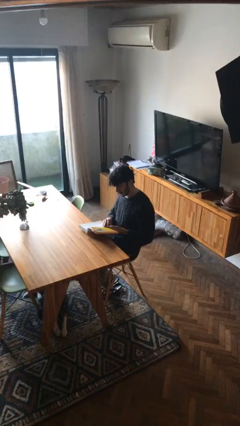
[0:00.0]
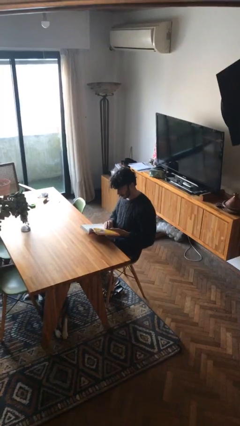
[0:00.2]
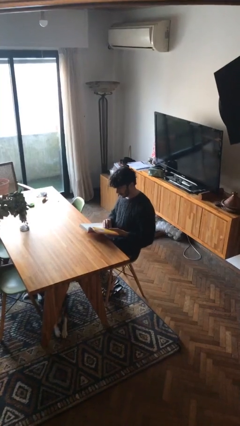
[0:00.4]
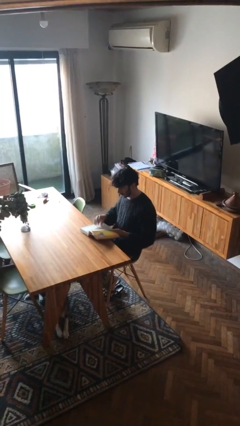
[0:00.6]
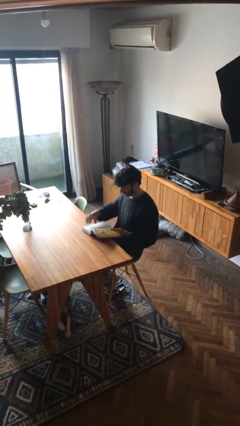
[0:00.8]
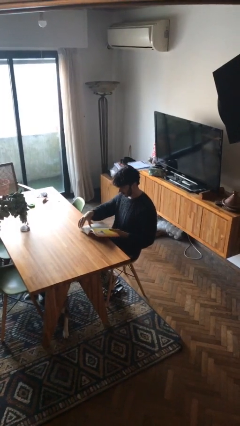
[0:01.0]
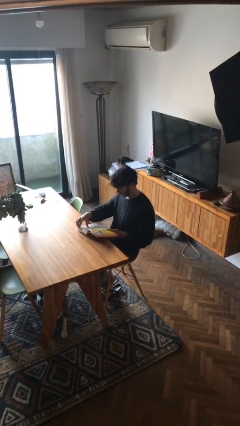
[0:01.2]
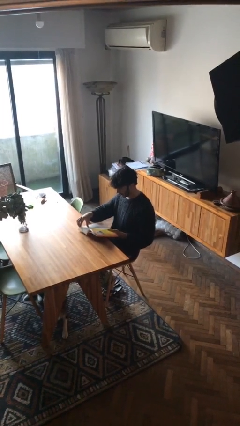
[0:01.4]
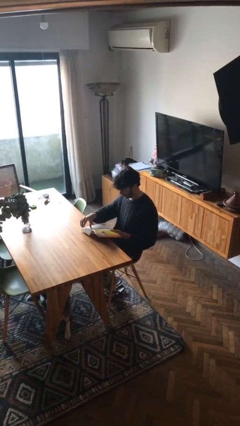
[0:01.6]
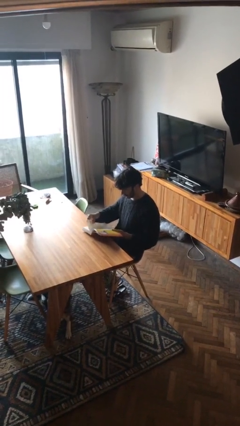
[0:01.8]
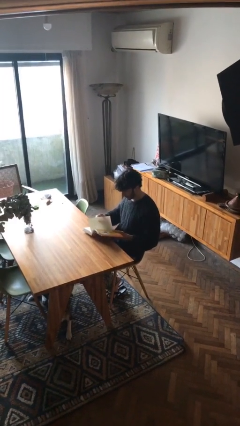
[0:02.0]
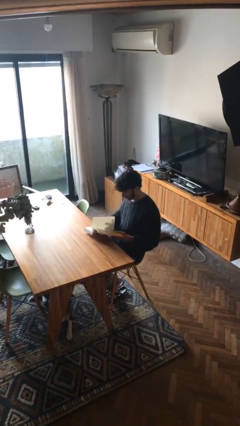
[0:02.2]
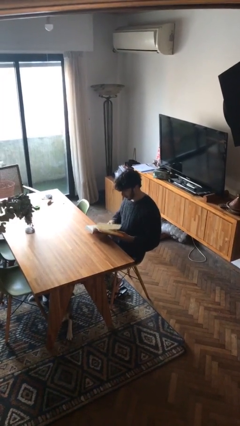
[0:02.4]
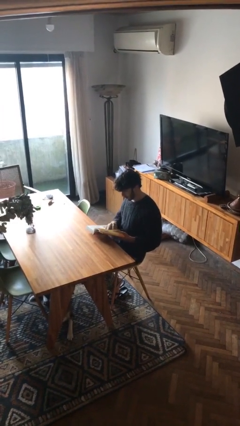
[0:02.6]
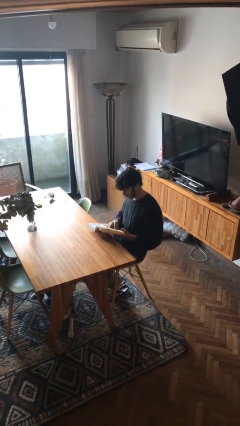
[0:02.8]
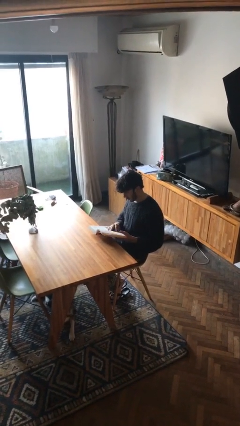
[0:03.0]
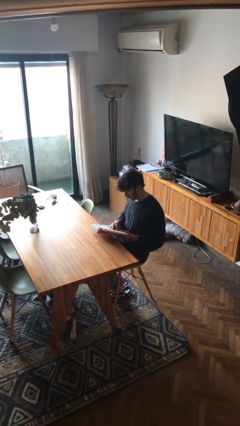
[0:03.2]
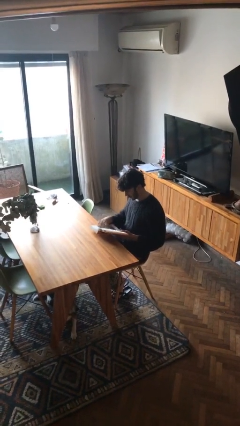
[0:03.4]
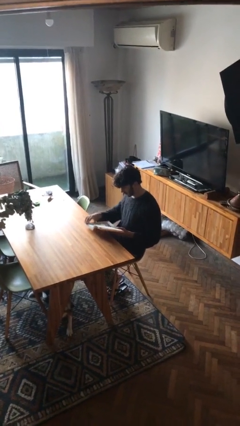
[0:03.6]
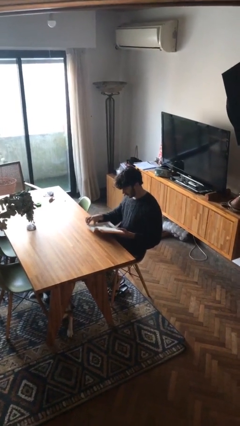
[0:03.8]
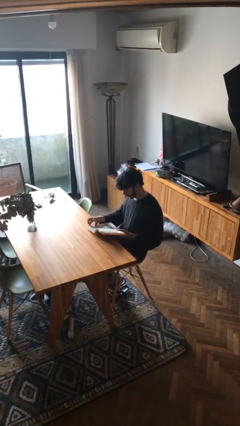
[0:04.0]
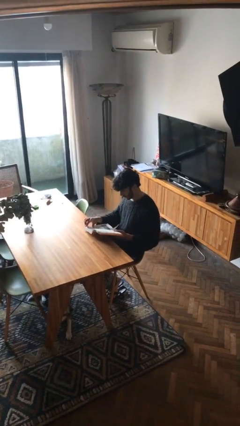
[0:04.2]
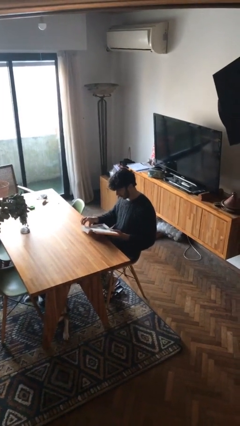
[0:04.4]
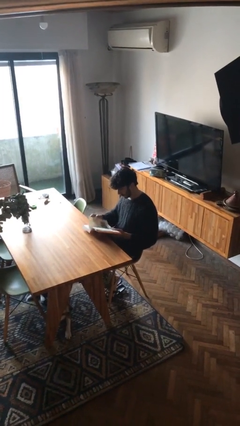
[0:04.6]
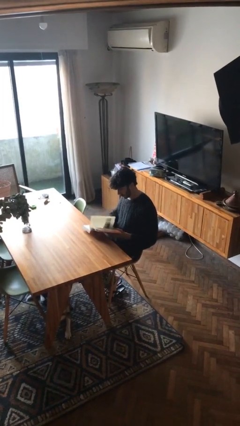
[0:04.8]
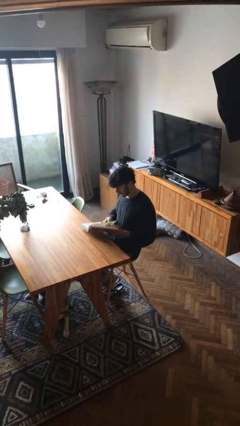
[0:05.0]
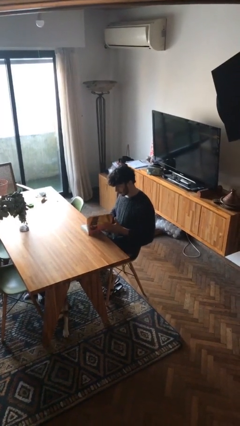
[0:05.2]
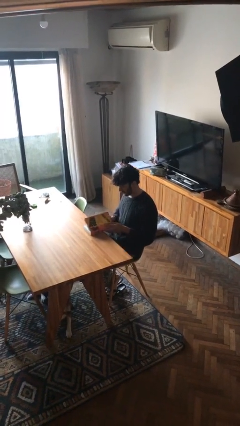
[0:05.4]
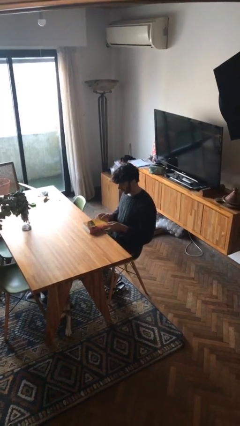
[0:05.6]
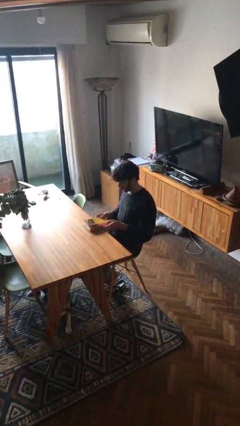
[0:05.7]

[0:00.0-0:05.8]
person reads document

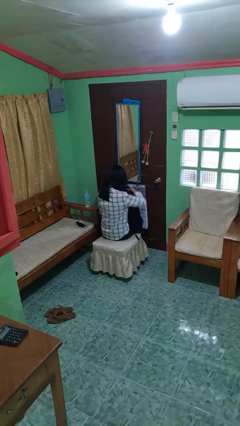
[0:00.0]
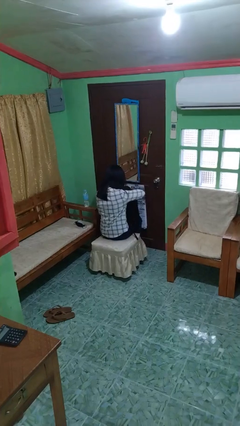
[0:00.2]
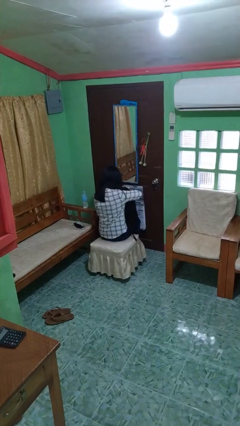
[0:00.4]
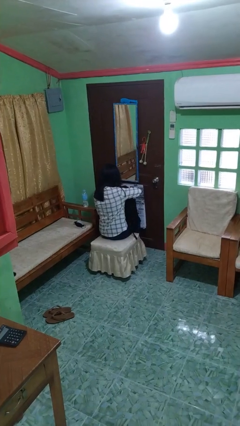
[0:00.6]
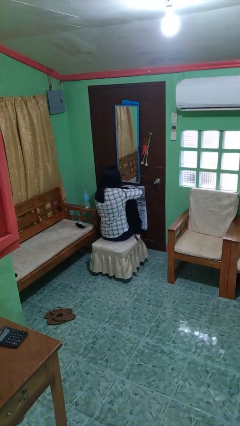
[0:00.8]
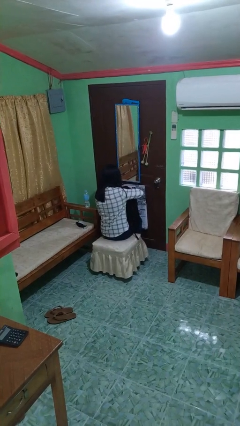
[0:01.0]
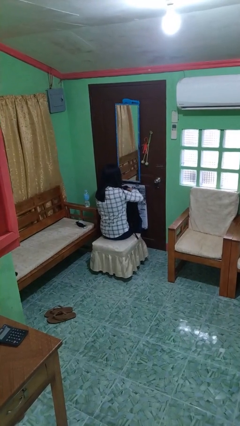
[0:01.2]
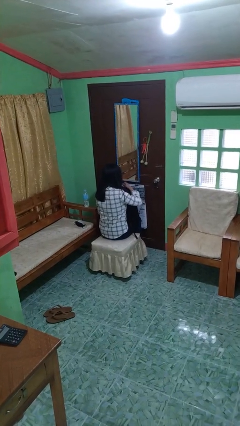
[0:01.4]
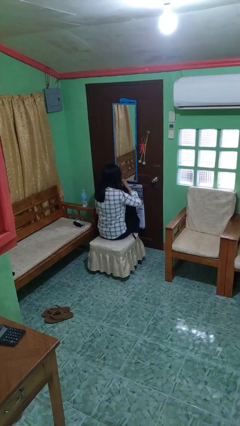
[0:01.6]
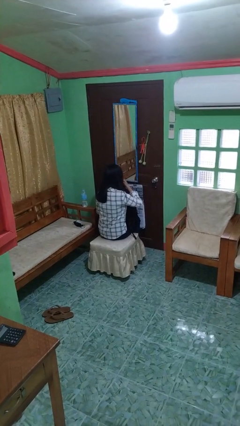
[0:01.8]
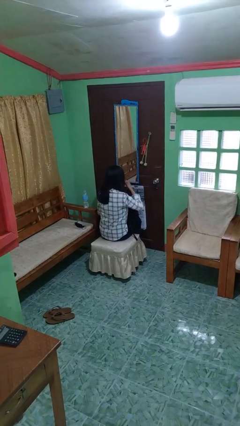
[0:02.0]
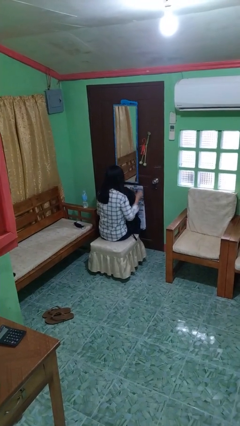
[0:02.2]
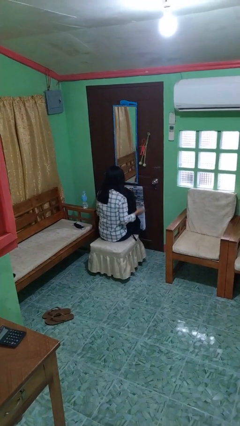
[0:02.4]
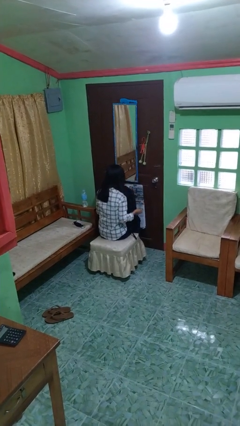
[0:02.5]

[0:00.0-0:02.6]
person eats snack from bag

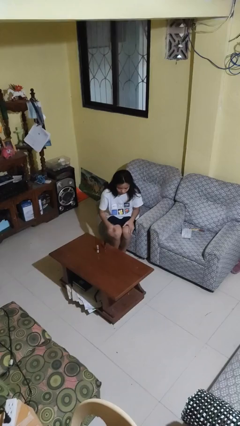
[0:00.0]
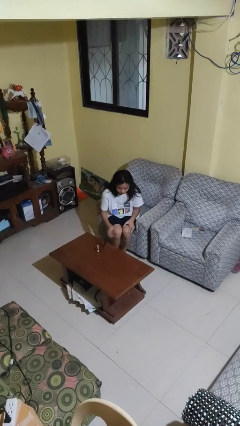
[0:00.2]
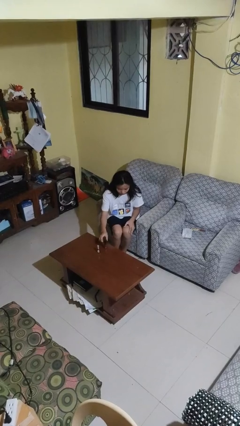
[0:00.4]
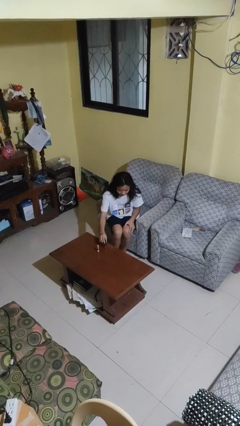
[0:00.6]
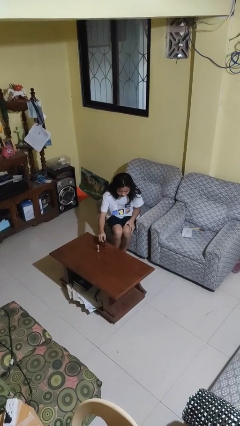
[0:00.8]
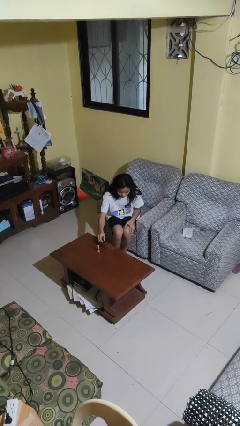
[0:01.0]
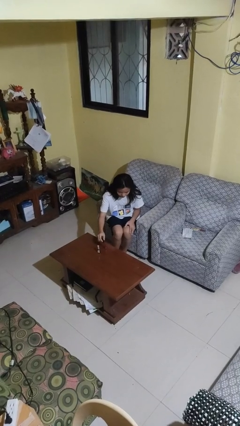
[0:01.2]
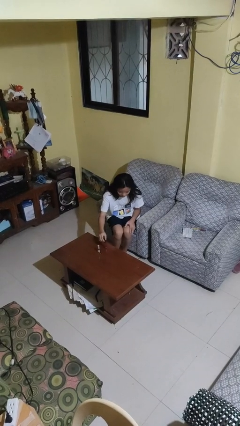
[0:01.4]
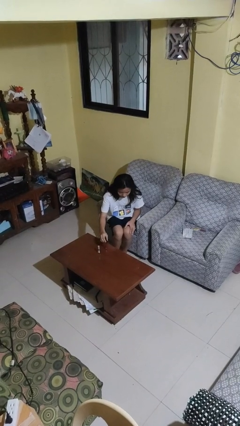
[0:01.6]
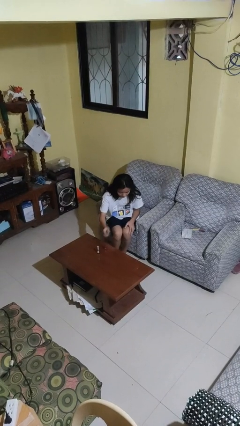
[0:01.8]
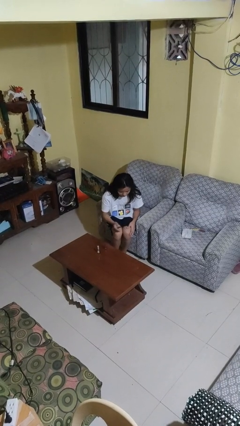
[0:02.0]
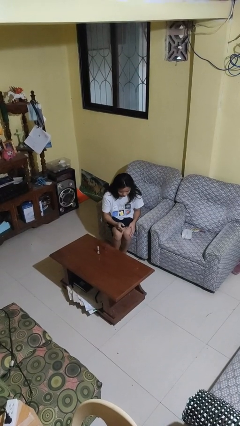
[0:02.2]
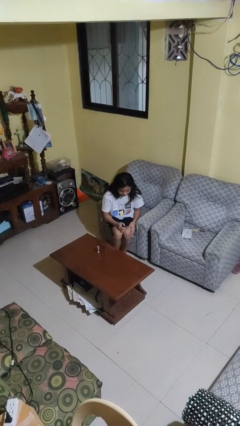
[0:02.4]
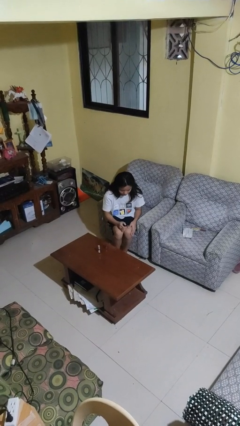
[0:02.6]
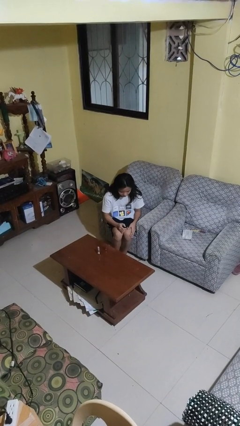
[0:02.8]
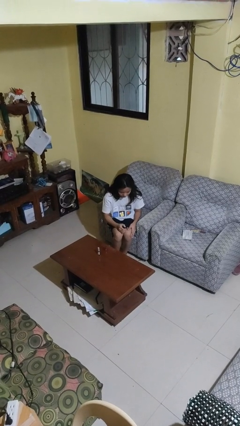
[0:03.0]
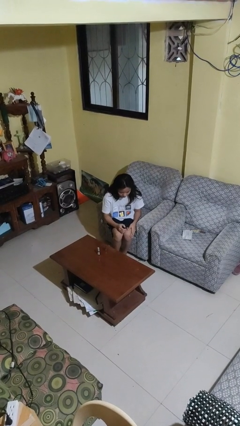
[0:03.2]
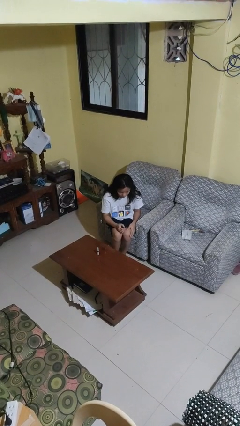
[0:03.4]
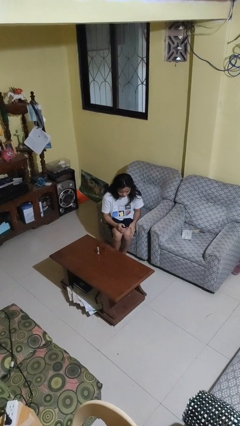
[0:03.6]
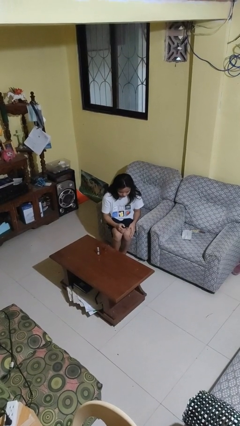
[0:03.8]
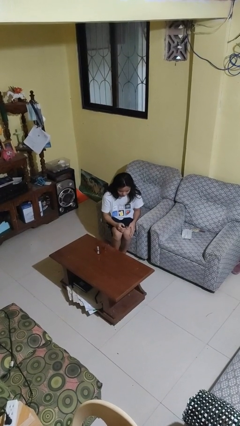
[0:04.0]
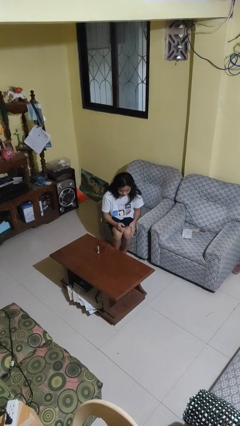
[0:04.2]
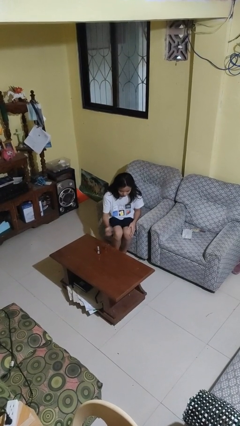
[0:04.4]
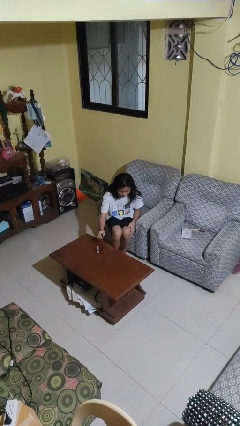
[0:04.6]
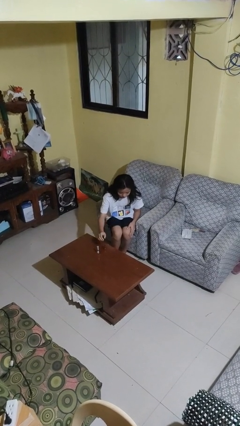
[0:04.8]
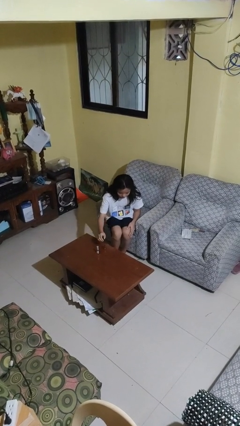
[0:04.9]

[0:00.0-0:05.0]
person paints fingernails

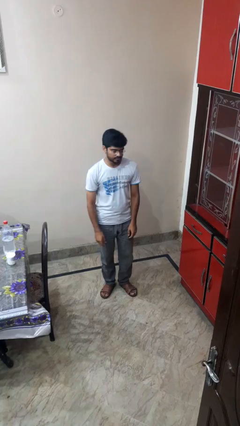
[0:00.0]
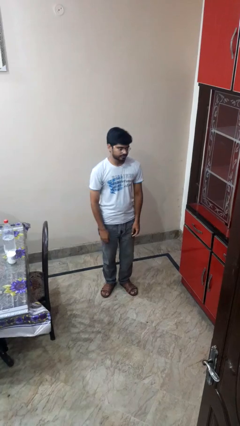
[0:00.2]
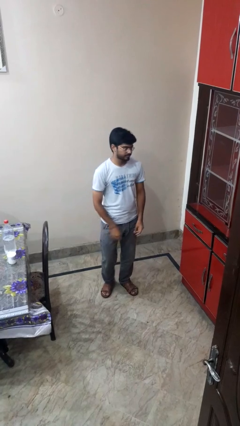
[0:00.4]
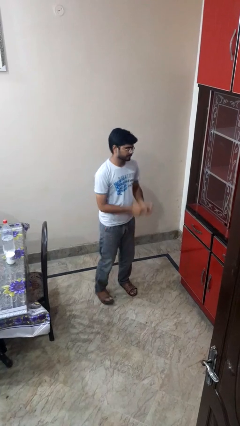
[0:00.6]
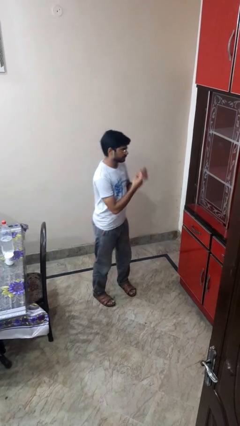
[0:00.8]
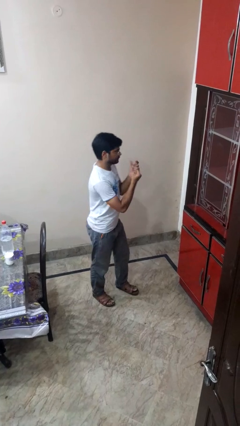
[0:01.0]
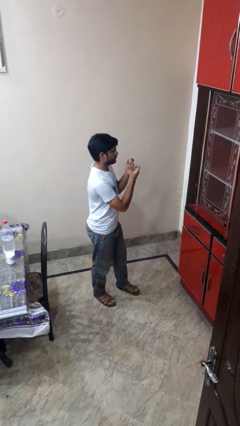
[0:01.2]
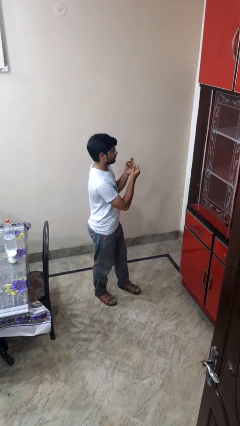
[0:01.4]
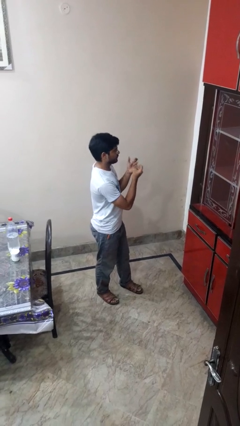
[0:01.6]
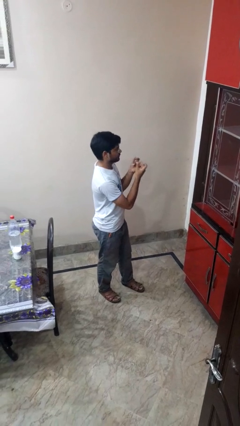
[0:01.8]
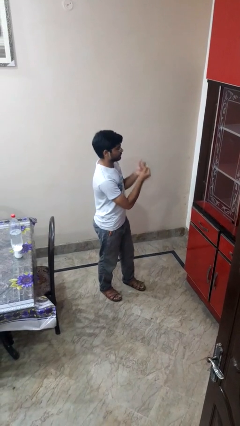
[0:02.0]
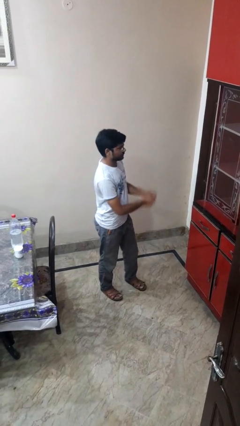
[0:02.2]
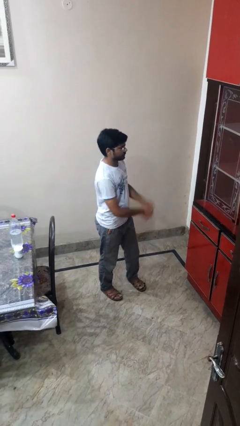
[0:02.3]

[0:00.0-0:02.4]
person snaps fingers

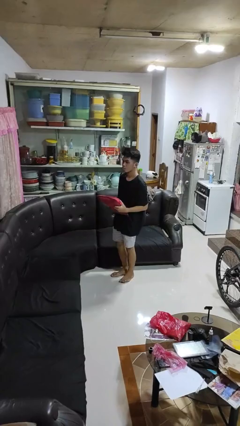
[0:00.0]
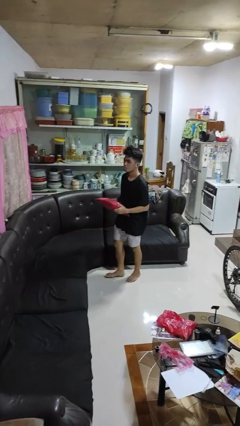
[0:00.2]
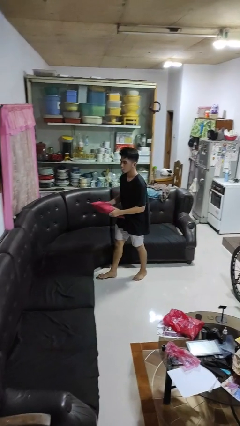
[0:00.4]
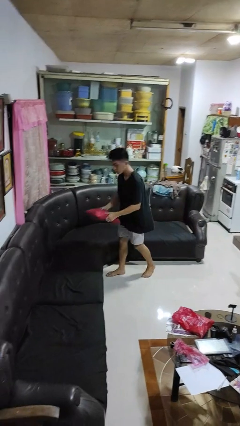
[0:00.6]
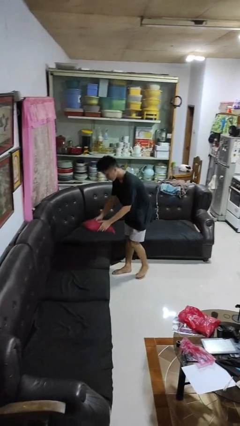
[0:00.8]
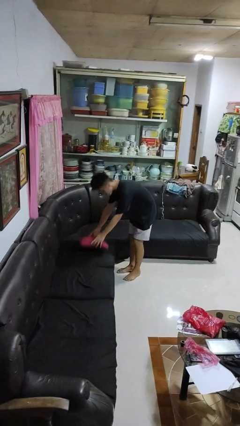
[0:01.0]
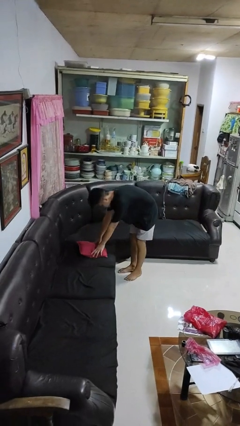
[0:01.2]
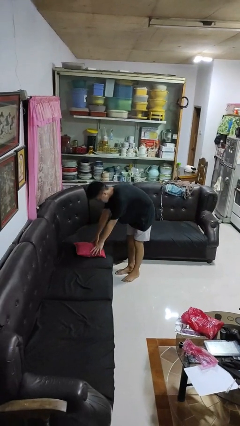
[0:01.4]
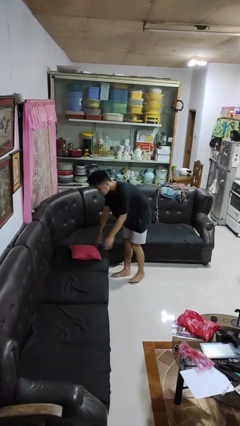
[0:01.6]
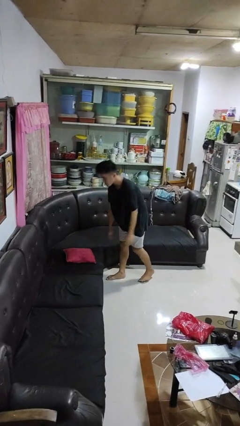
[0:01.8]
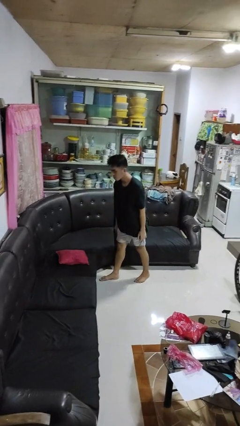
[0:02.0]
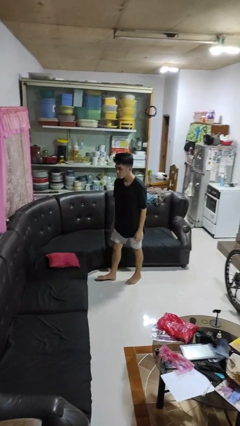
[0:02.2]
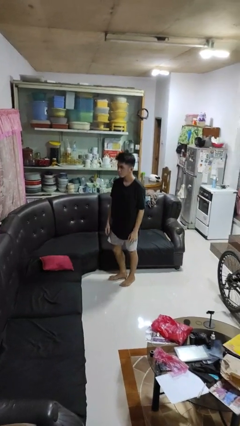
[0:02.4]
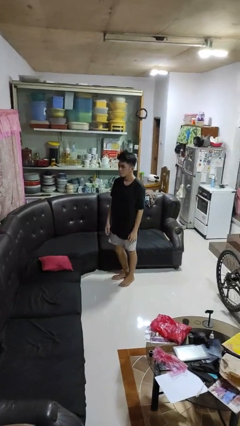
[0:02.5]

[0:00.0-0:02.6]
person puts down object on couch
